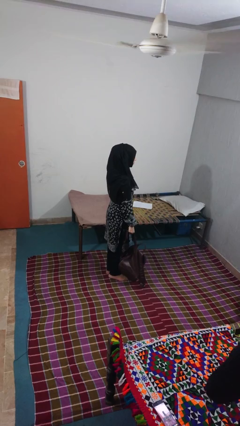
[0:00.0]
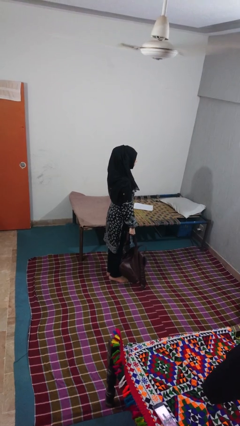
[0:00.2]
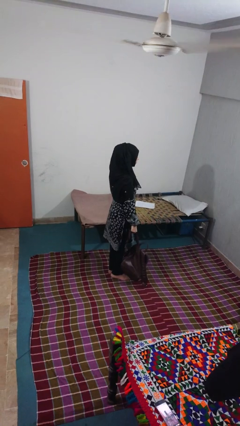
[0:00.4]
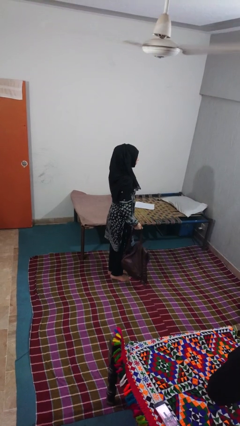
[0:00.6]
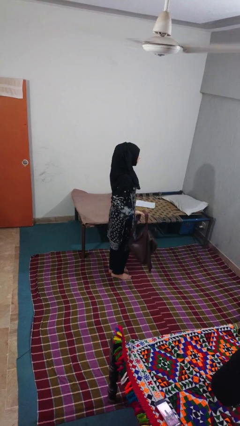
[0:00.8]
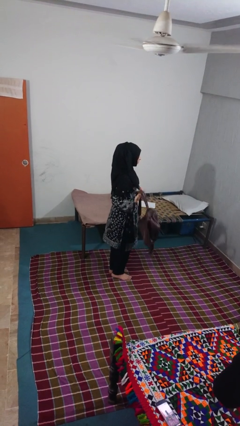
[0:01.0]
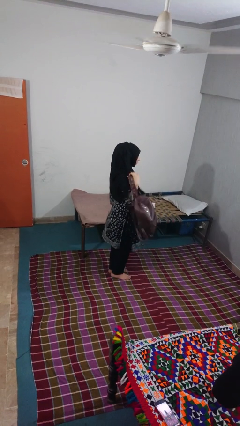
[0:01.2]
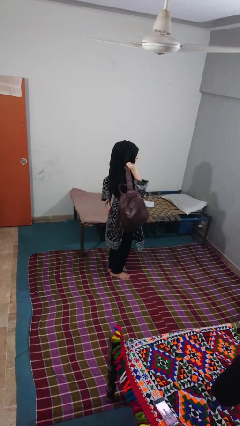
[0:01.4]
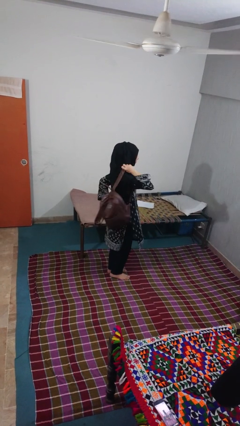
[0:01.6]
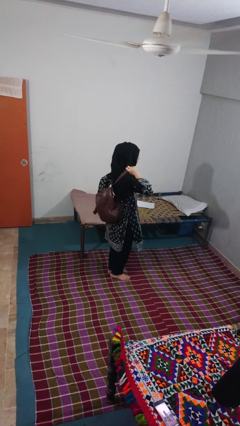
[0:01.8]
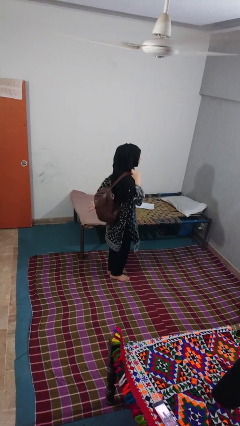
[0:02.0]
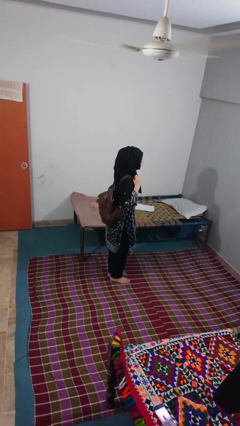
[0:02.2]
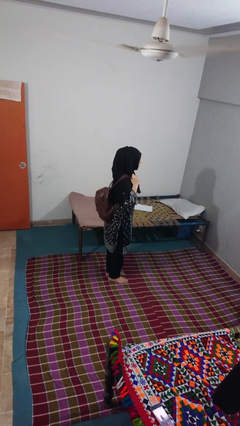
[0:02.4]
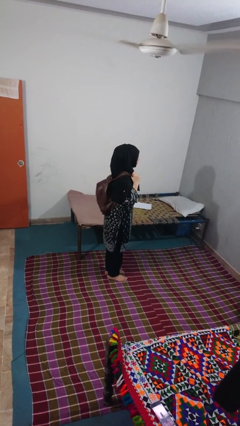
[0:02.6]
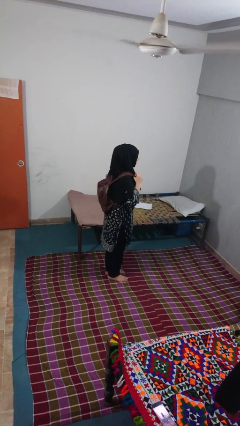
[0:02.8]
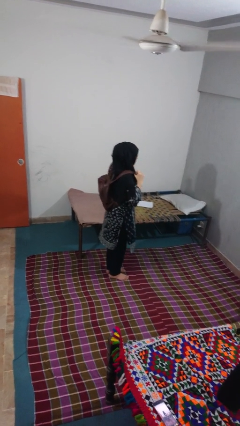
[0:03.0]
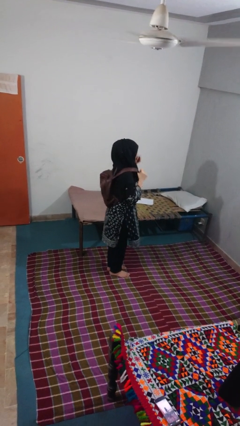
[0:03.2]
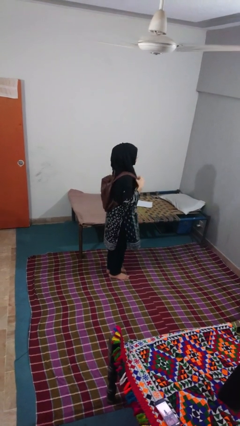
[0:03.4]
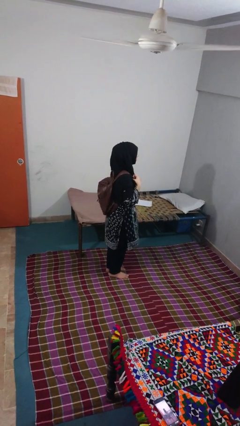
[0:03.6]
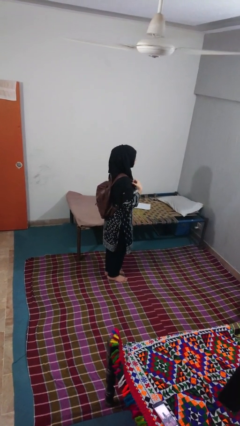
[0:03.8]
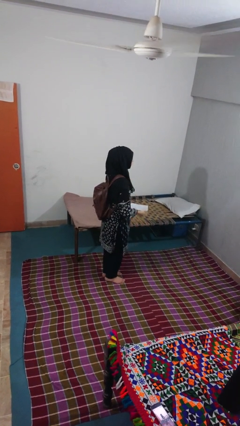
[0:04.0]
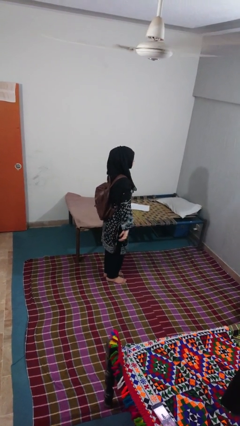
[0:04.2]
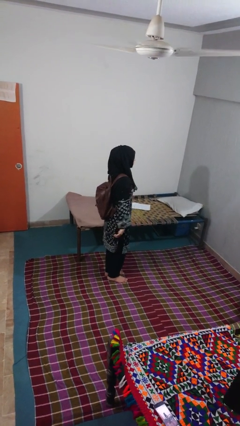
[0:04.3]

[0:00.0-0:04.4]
person puts on backpack

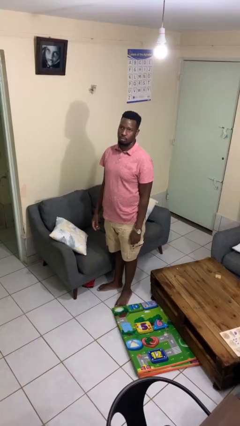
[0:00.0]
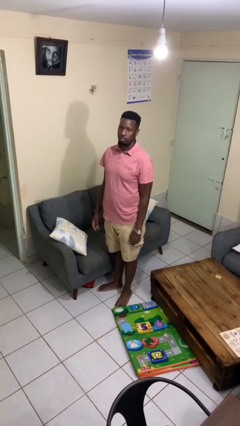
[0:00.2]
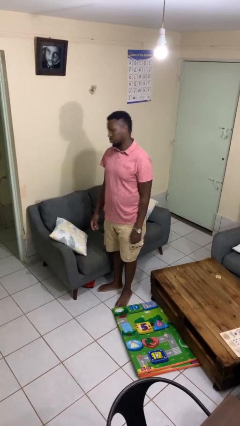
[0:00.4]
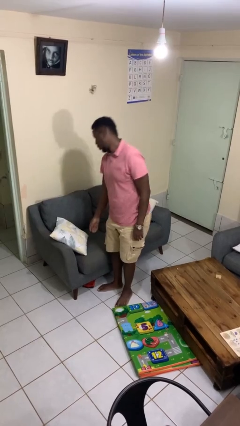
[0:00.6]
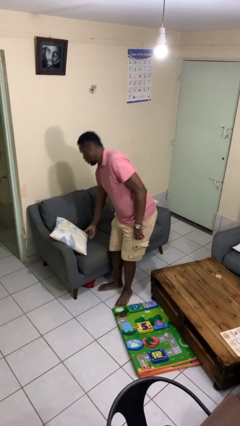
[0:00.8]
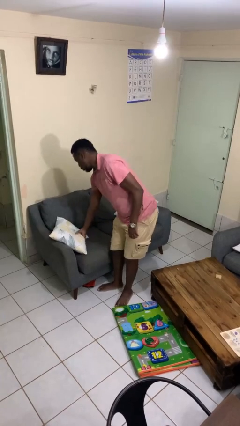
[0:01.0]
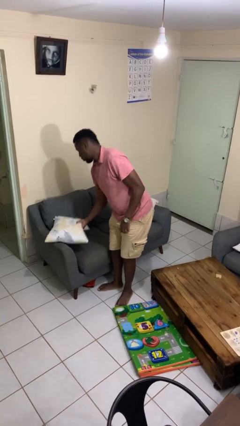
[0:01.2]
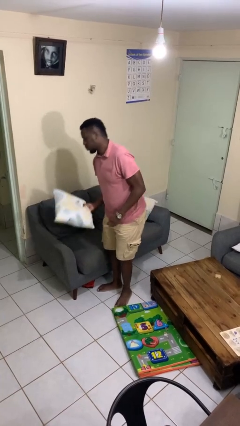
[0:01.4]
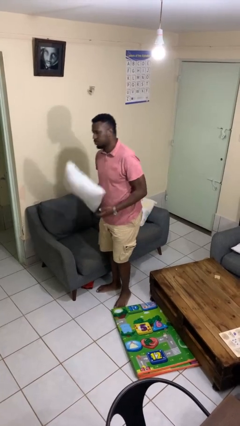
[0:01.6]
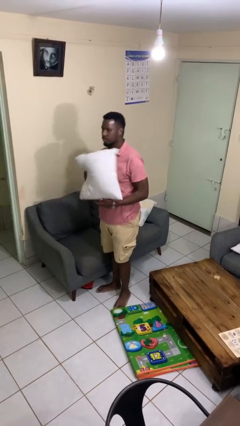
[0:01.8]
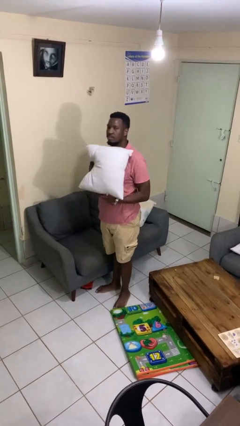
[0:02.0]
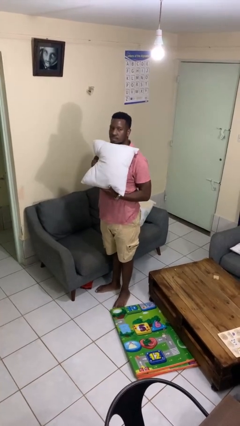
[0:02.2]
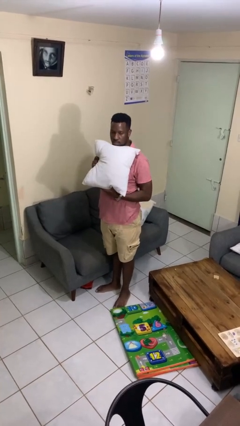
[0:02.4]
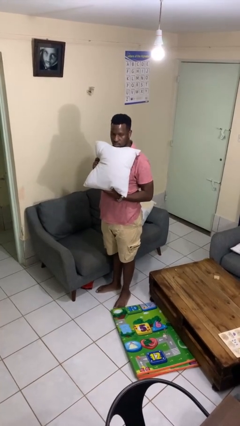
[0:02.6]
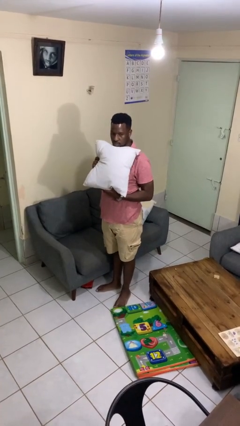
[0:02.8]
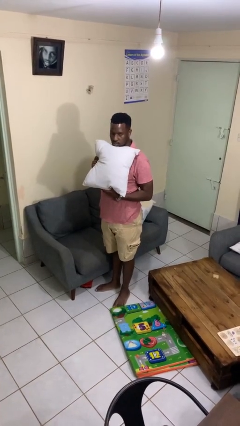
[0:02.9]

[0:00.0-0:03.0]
person picks up object from couch

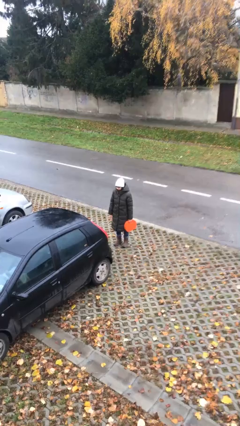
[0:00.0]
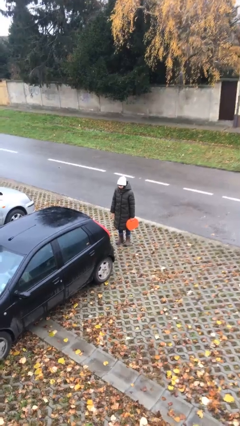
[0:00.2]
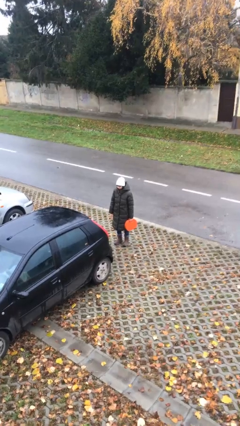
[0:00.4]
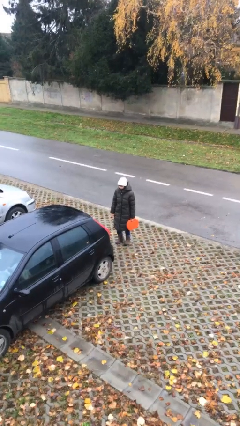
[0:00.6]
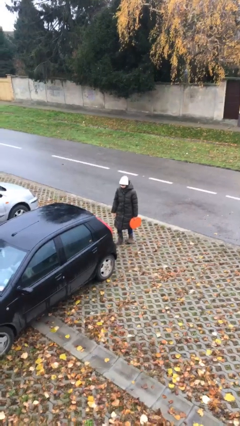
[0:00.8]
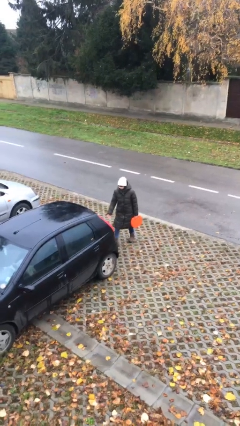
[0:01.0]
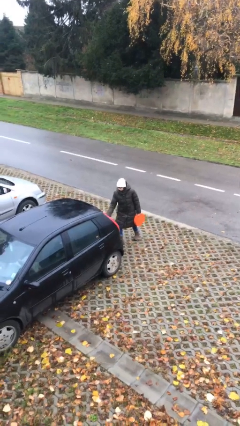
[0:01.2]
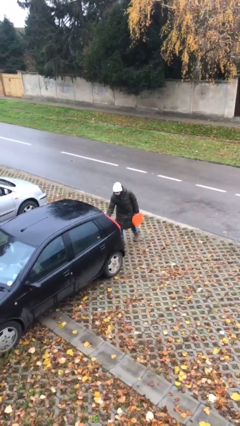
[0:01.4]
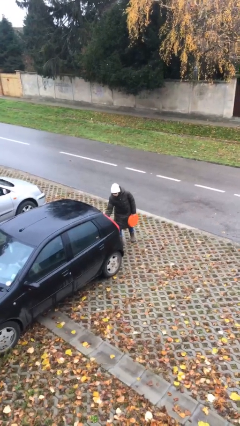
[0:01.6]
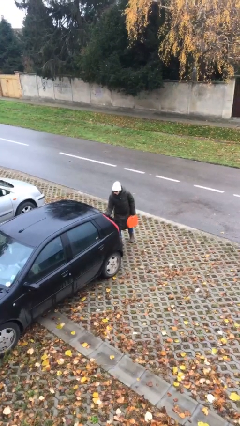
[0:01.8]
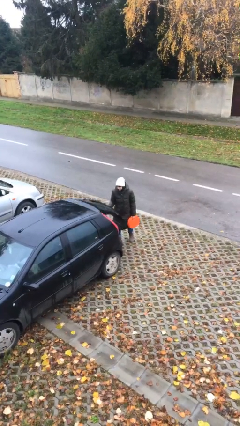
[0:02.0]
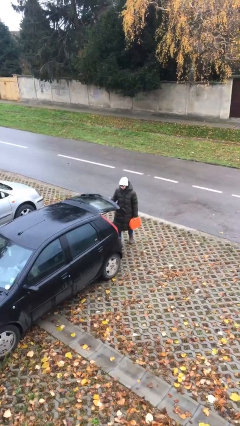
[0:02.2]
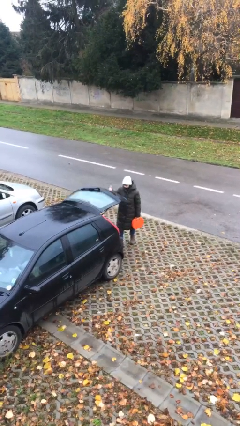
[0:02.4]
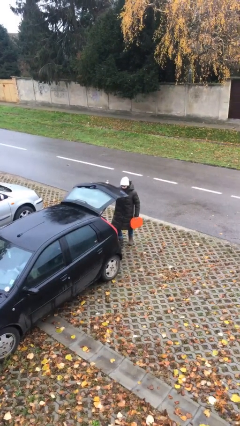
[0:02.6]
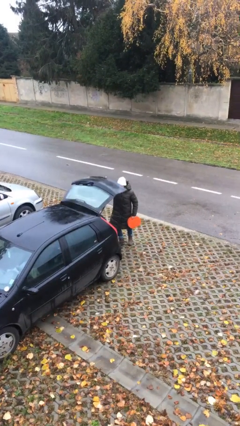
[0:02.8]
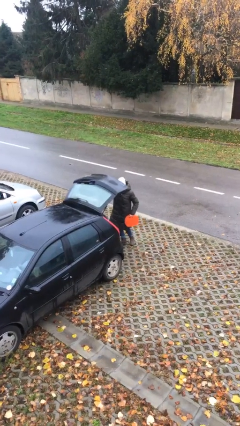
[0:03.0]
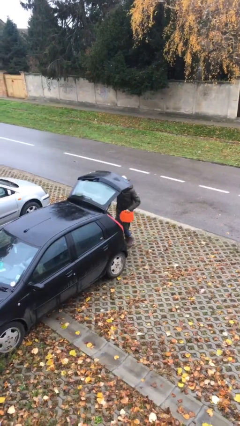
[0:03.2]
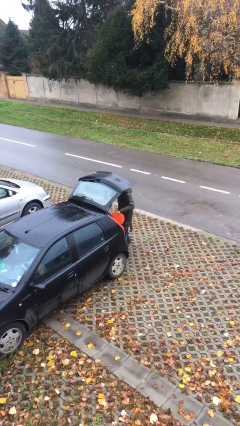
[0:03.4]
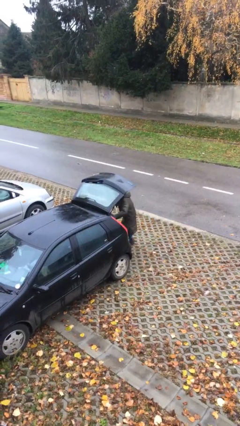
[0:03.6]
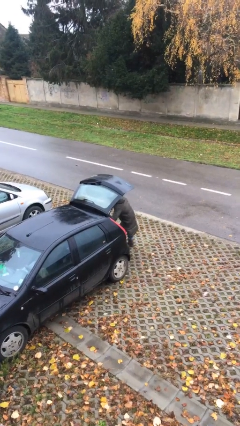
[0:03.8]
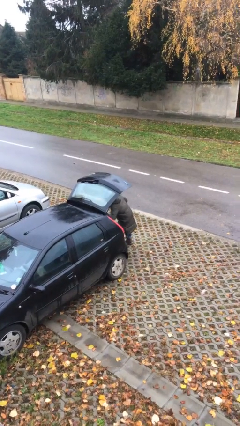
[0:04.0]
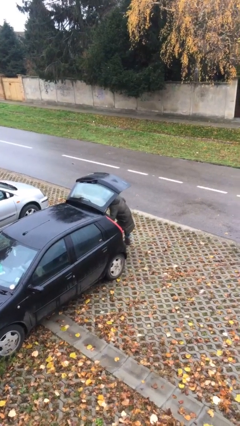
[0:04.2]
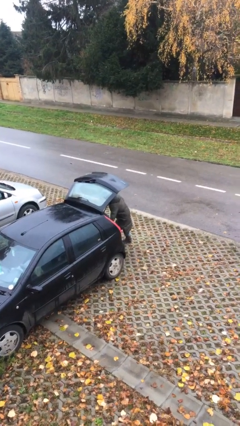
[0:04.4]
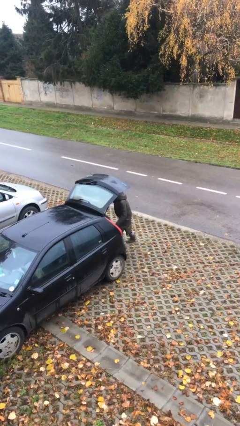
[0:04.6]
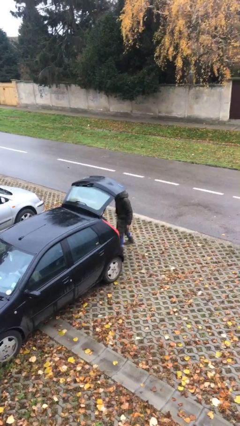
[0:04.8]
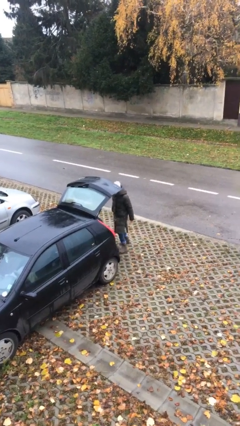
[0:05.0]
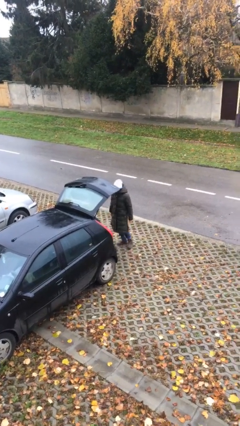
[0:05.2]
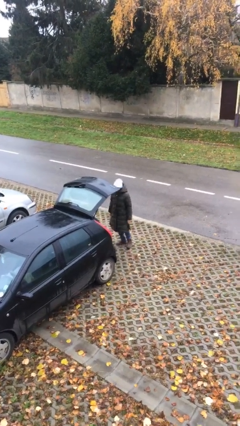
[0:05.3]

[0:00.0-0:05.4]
person loads car

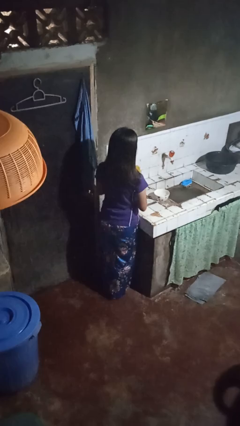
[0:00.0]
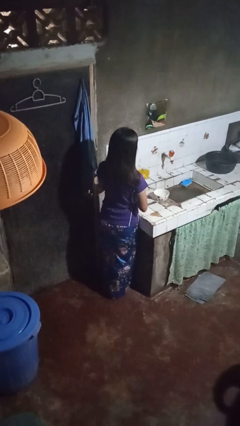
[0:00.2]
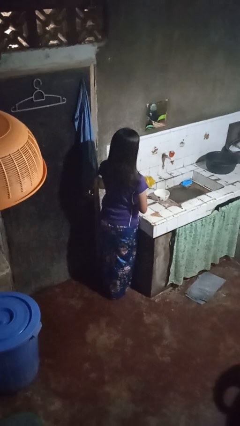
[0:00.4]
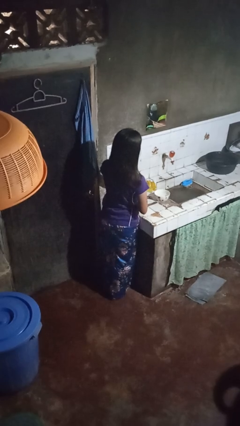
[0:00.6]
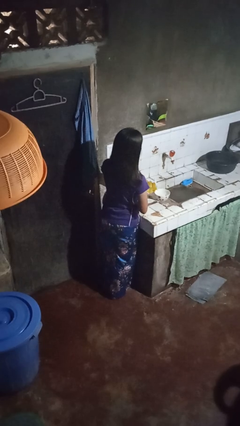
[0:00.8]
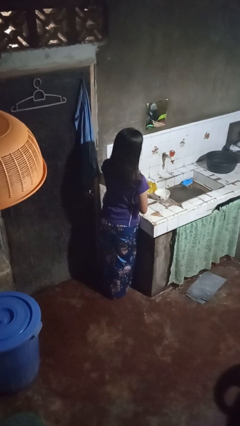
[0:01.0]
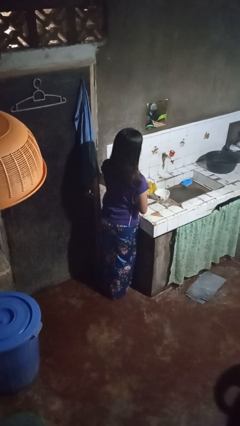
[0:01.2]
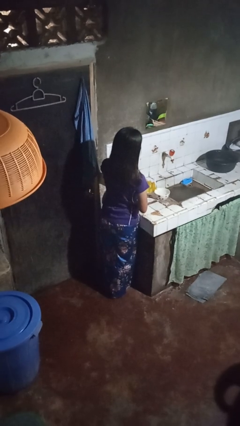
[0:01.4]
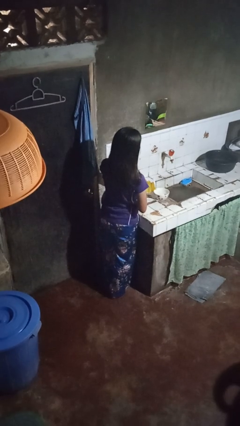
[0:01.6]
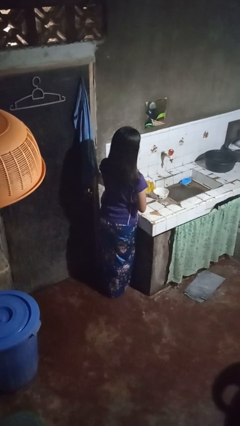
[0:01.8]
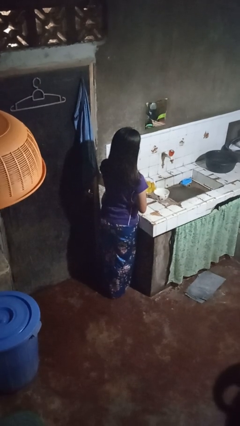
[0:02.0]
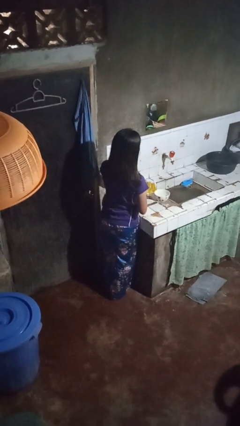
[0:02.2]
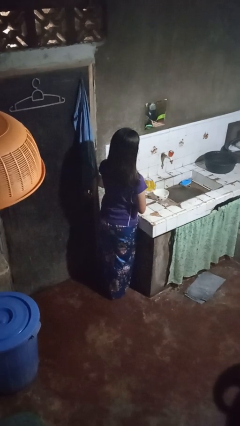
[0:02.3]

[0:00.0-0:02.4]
person pours into bowl

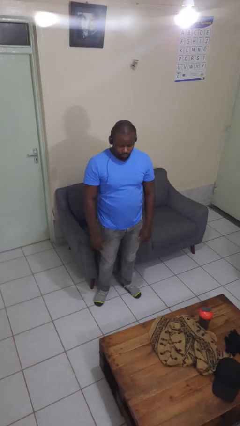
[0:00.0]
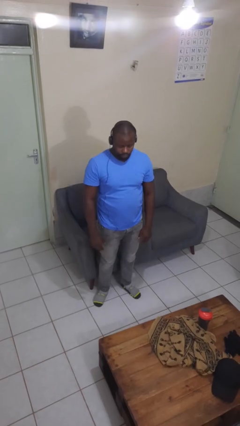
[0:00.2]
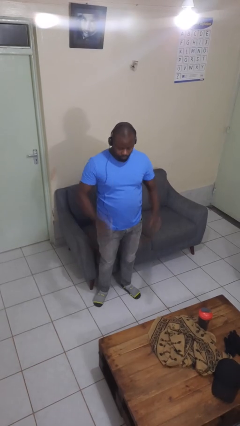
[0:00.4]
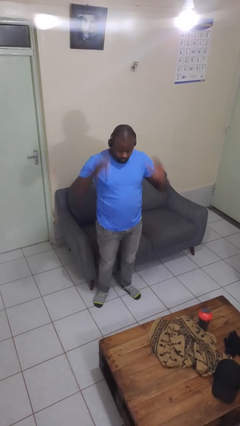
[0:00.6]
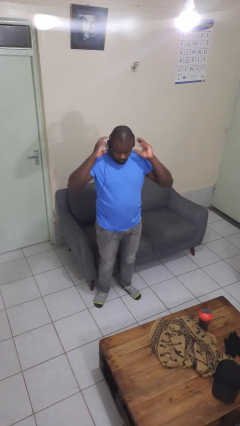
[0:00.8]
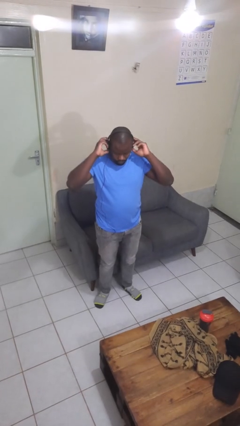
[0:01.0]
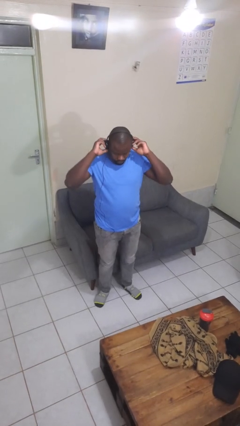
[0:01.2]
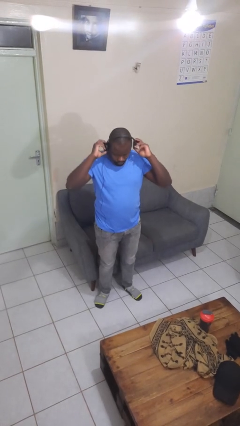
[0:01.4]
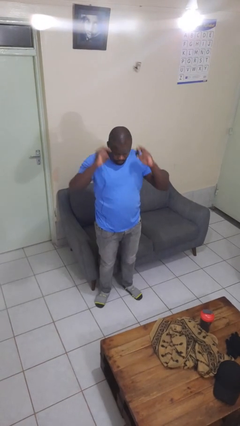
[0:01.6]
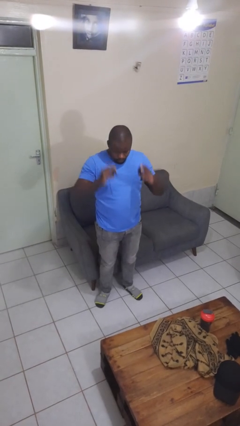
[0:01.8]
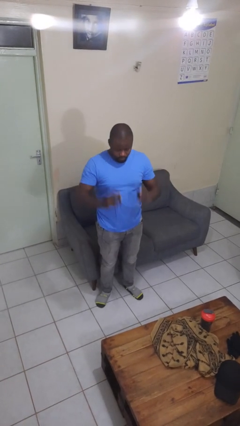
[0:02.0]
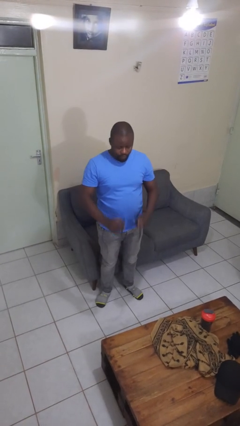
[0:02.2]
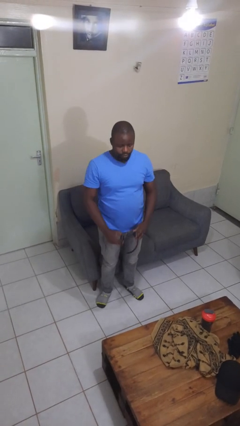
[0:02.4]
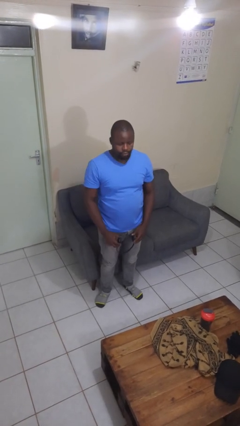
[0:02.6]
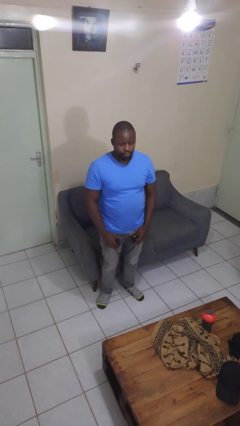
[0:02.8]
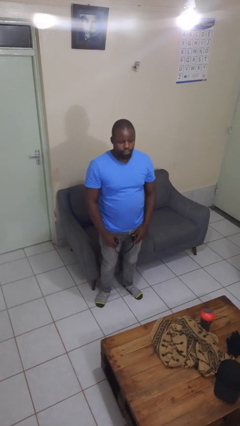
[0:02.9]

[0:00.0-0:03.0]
person takes off headphones
